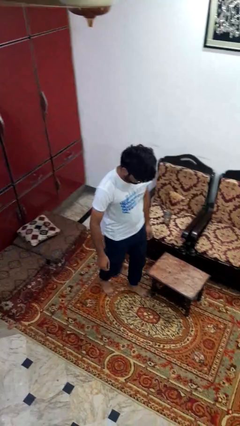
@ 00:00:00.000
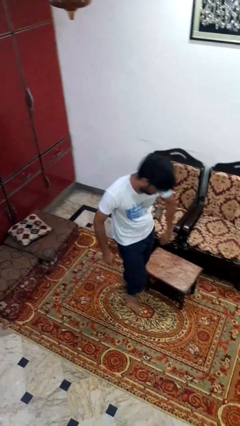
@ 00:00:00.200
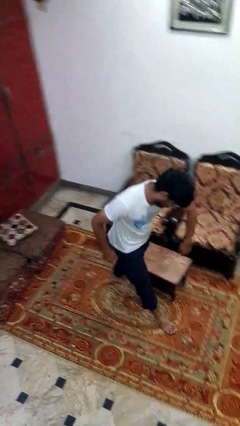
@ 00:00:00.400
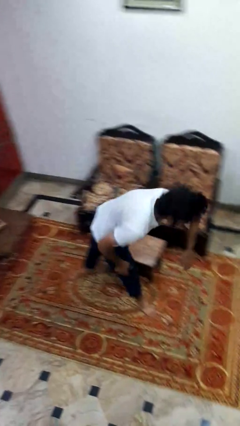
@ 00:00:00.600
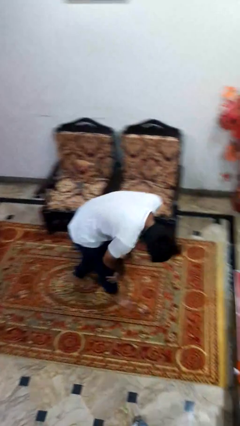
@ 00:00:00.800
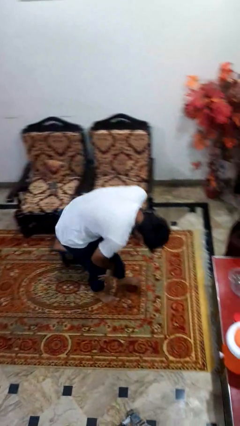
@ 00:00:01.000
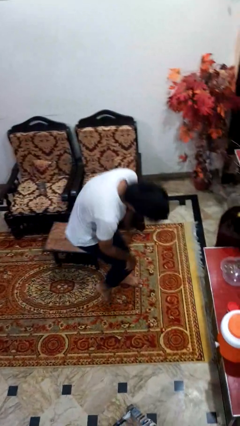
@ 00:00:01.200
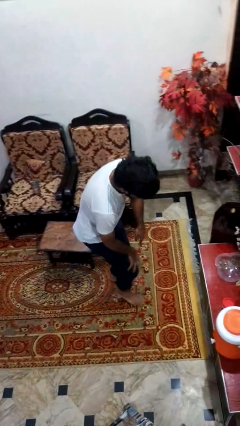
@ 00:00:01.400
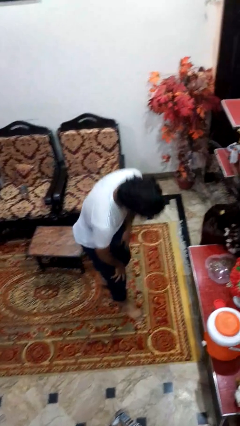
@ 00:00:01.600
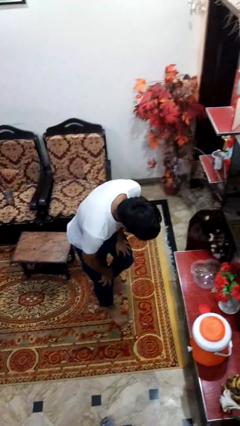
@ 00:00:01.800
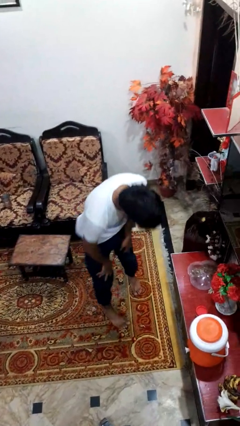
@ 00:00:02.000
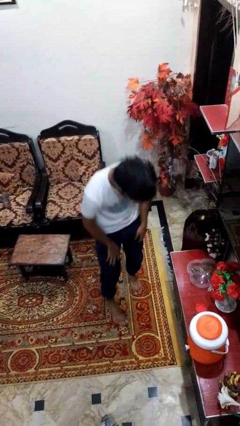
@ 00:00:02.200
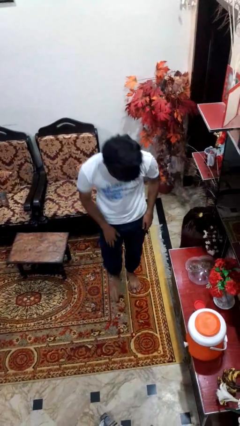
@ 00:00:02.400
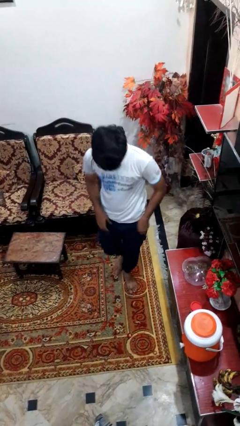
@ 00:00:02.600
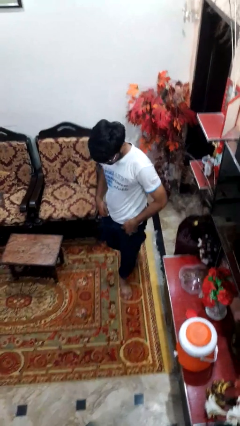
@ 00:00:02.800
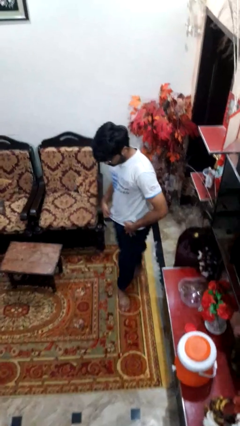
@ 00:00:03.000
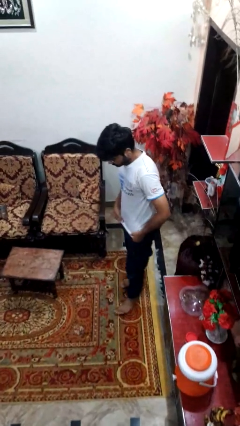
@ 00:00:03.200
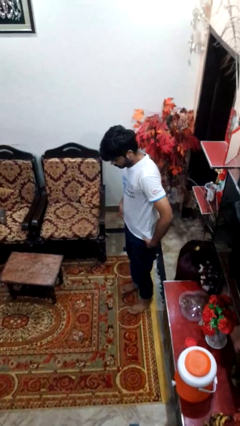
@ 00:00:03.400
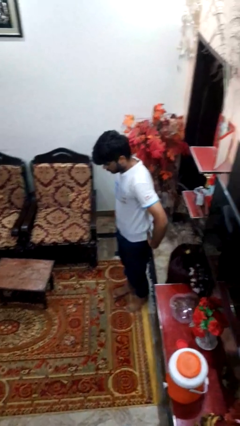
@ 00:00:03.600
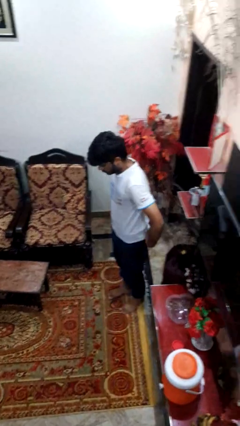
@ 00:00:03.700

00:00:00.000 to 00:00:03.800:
person bumps into table

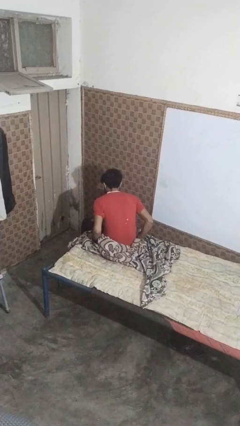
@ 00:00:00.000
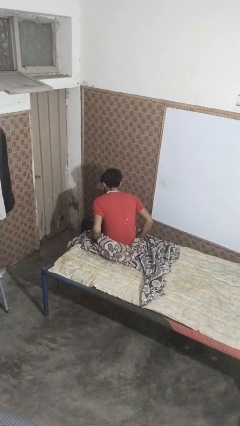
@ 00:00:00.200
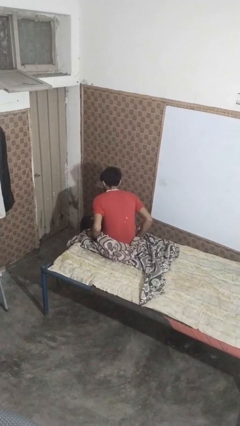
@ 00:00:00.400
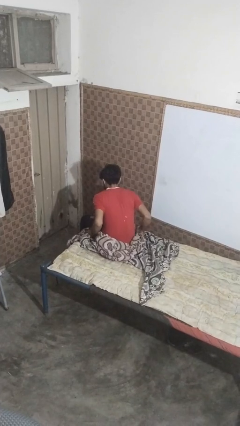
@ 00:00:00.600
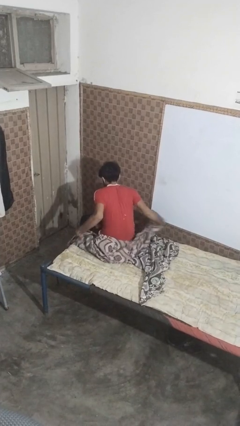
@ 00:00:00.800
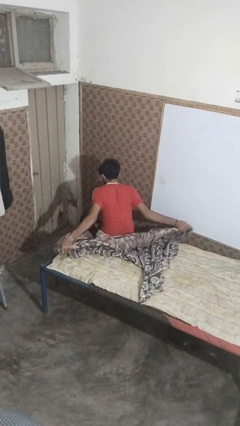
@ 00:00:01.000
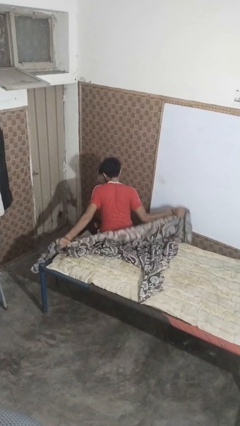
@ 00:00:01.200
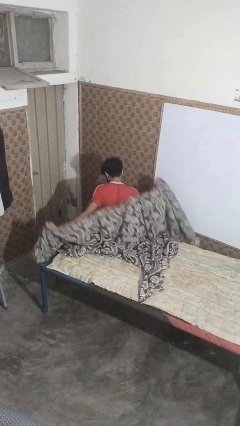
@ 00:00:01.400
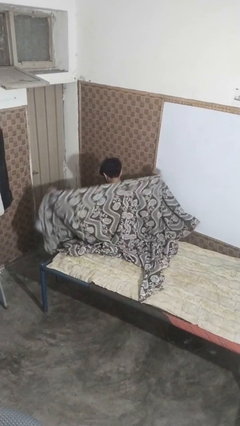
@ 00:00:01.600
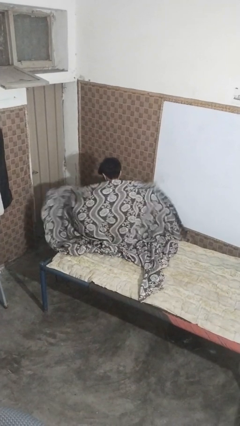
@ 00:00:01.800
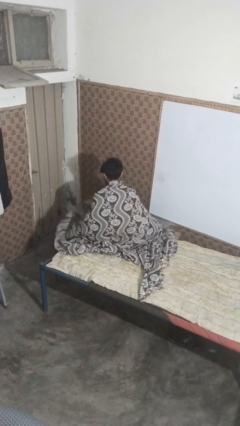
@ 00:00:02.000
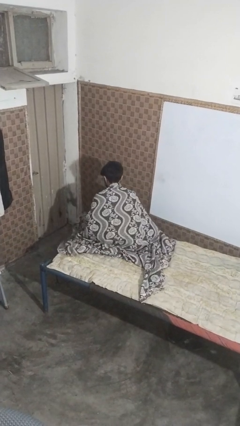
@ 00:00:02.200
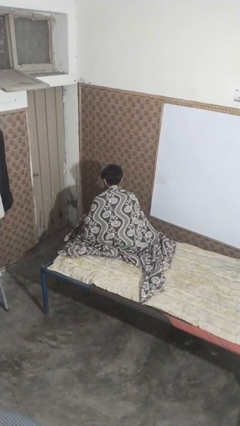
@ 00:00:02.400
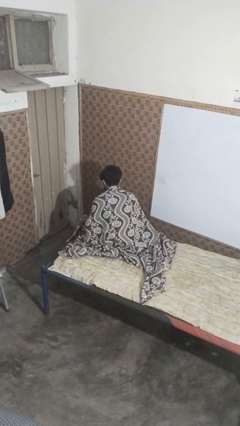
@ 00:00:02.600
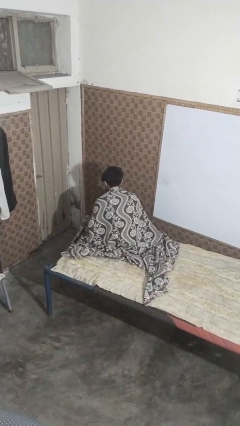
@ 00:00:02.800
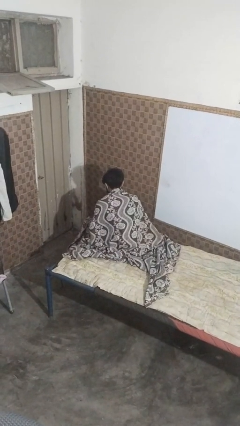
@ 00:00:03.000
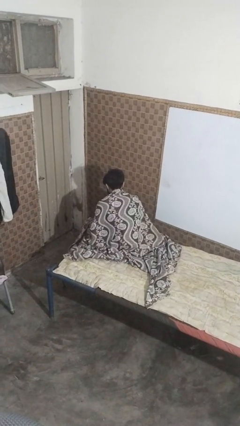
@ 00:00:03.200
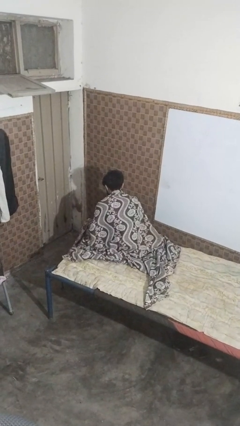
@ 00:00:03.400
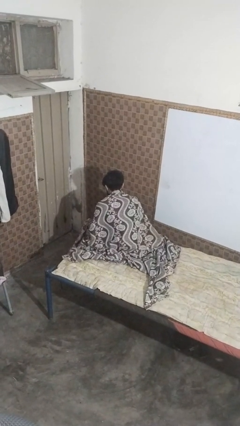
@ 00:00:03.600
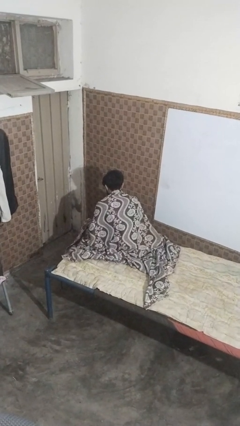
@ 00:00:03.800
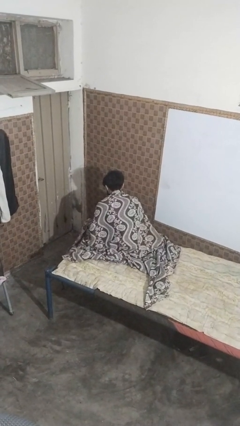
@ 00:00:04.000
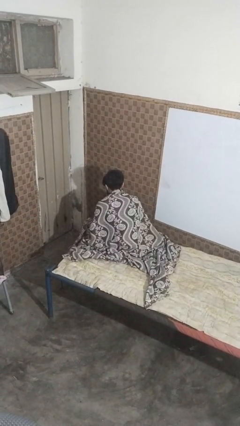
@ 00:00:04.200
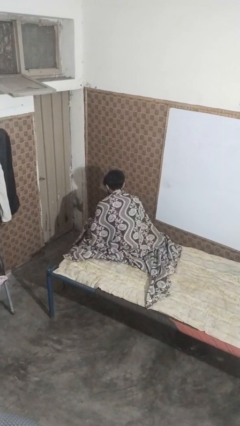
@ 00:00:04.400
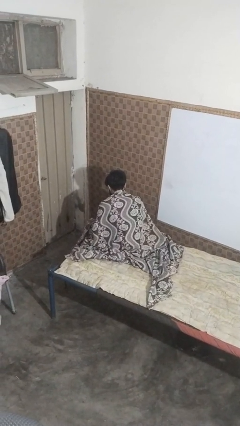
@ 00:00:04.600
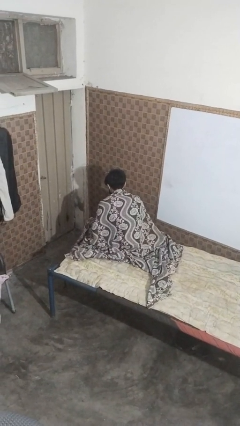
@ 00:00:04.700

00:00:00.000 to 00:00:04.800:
person covers with bedsheets

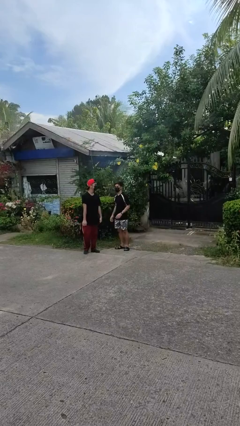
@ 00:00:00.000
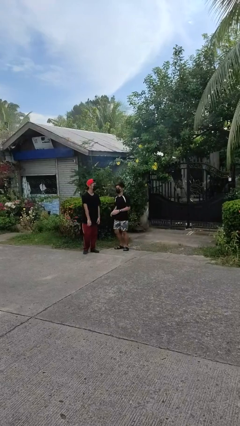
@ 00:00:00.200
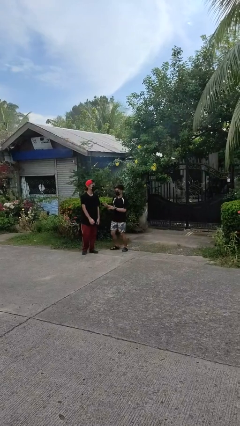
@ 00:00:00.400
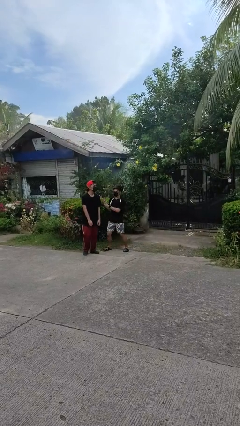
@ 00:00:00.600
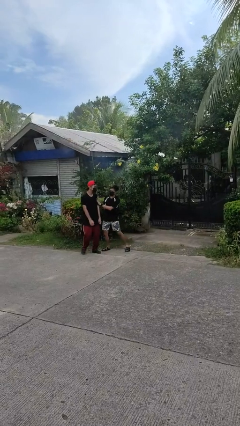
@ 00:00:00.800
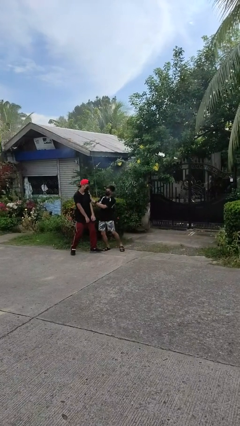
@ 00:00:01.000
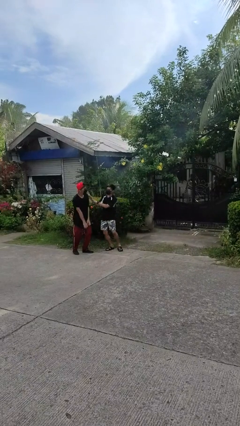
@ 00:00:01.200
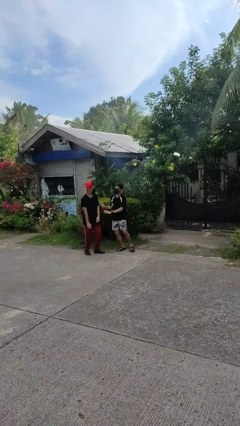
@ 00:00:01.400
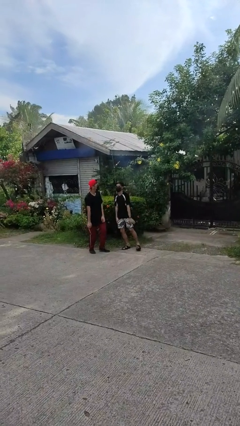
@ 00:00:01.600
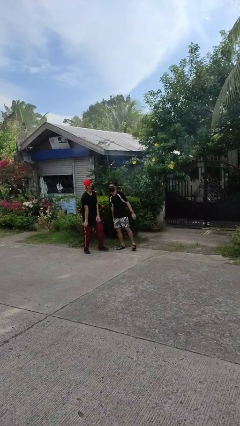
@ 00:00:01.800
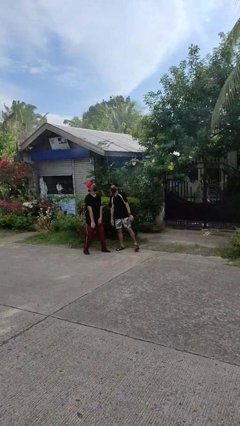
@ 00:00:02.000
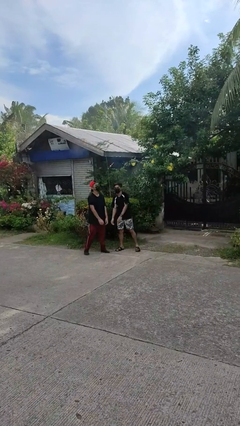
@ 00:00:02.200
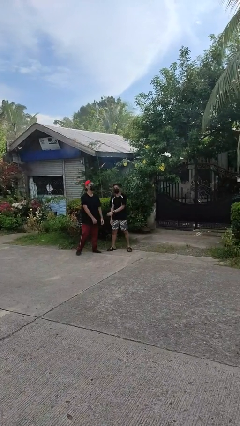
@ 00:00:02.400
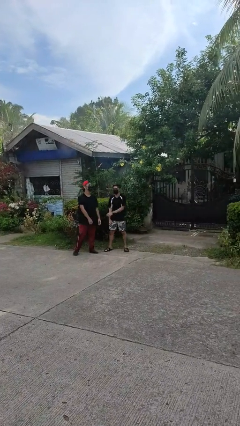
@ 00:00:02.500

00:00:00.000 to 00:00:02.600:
person shoves person

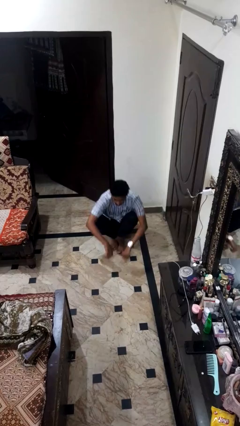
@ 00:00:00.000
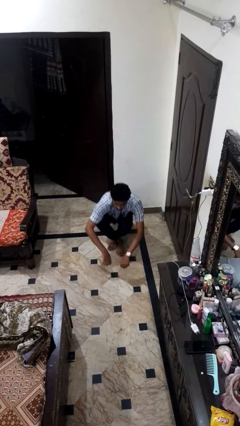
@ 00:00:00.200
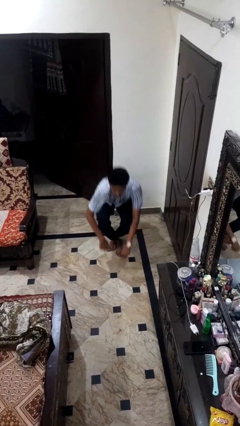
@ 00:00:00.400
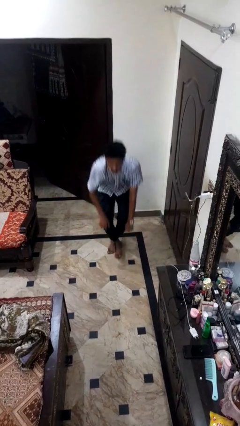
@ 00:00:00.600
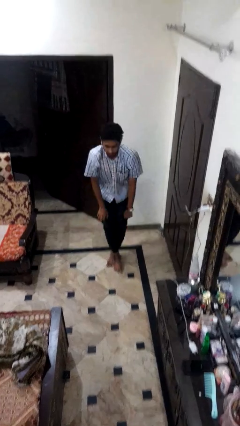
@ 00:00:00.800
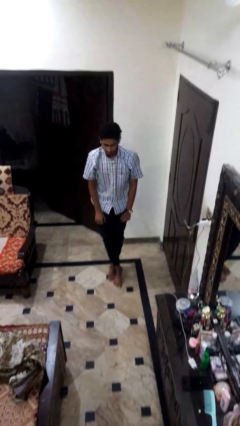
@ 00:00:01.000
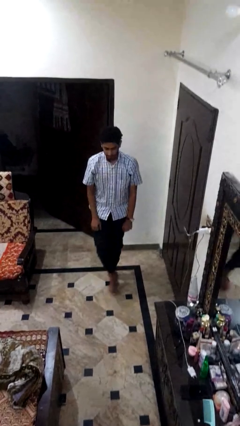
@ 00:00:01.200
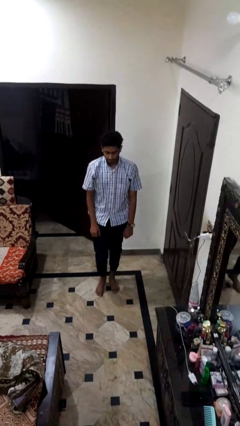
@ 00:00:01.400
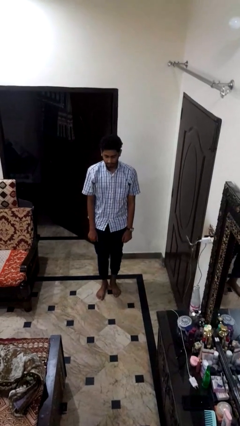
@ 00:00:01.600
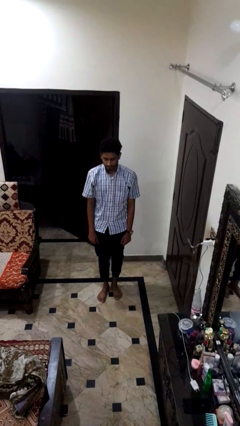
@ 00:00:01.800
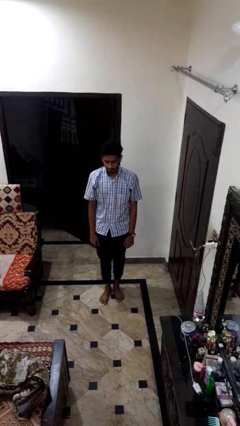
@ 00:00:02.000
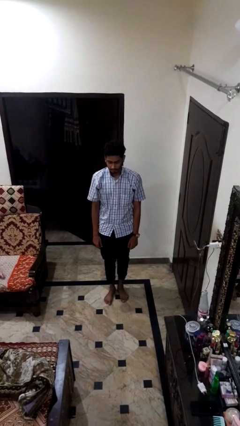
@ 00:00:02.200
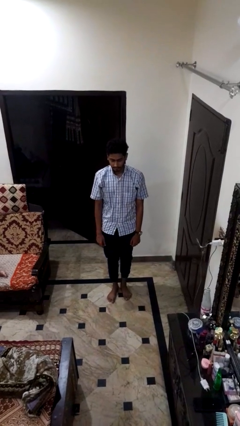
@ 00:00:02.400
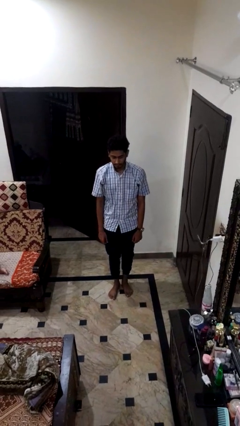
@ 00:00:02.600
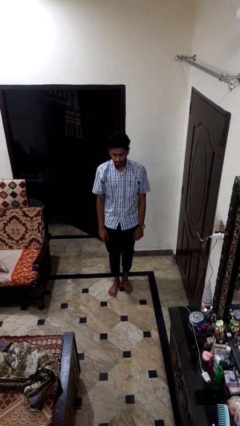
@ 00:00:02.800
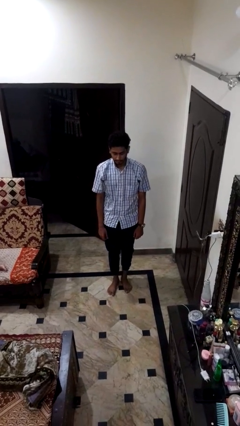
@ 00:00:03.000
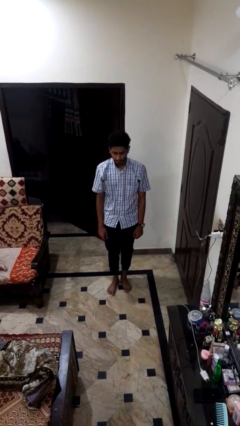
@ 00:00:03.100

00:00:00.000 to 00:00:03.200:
person stands up from floor

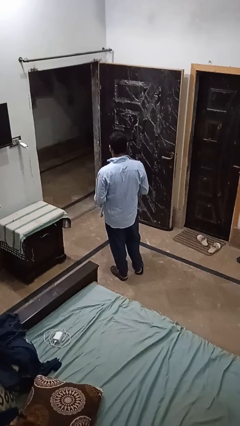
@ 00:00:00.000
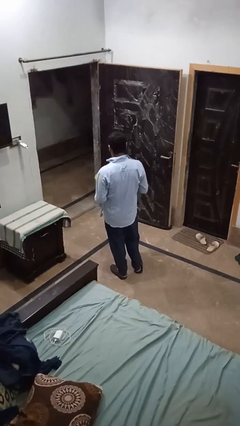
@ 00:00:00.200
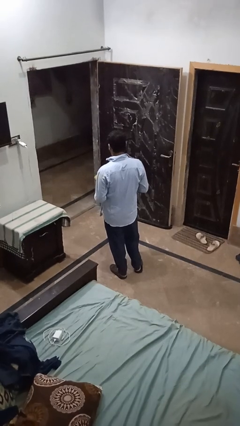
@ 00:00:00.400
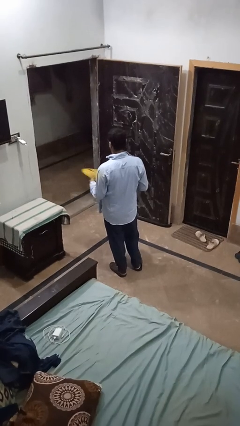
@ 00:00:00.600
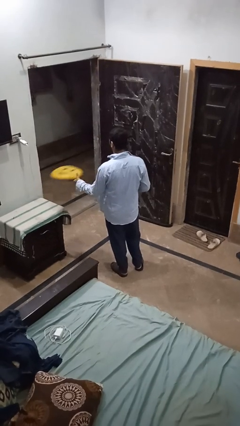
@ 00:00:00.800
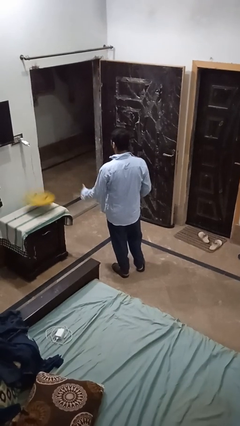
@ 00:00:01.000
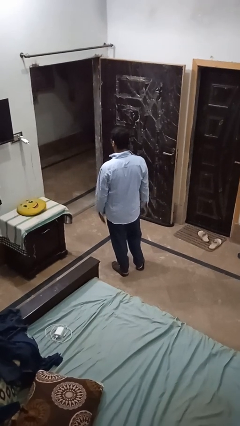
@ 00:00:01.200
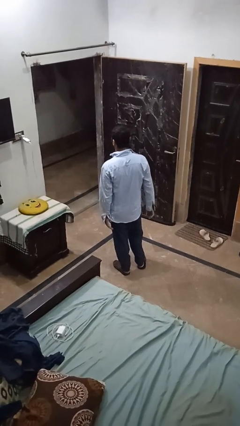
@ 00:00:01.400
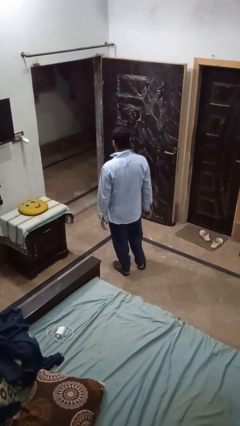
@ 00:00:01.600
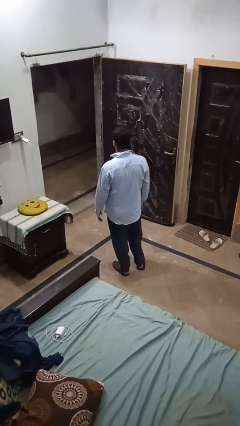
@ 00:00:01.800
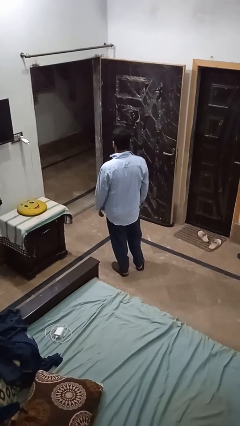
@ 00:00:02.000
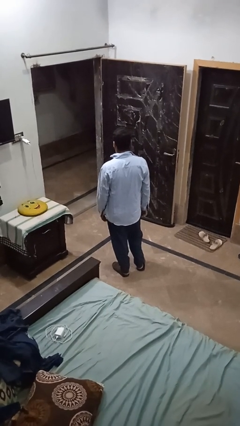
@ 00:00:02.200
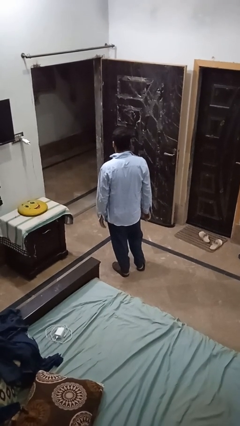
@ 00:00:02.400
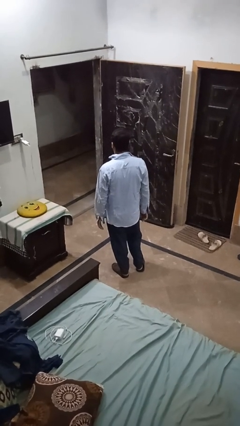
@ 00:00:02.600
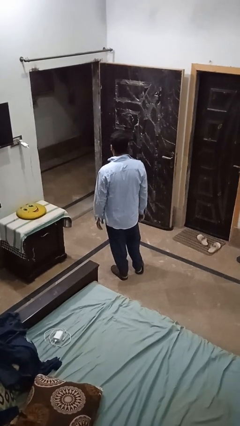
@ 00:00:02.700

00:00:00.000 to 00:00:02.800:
person throws object on table
